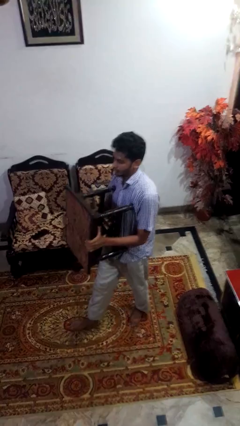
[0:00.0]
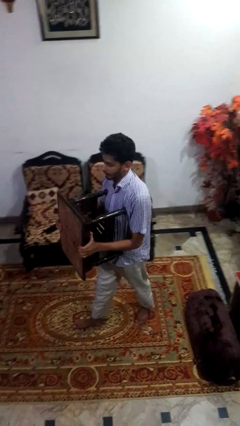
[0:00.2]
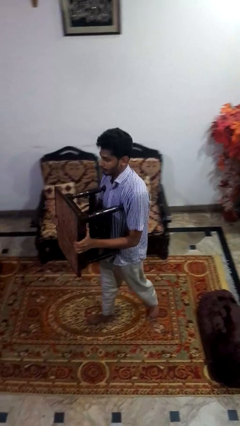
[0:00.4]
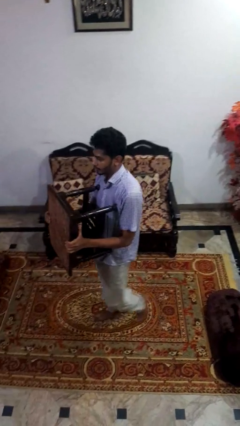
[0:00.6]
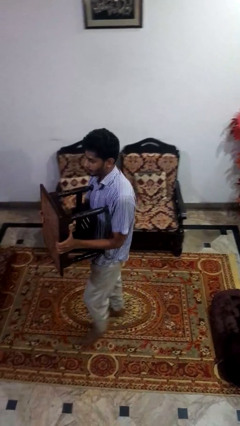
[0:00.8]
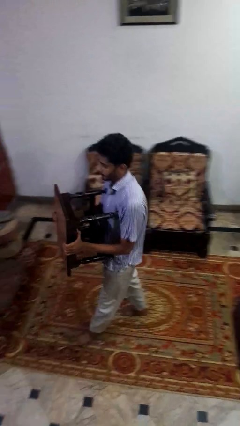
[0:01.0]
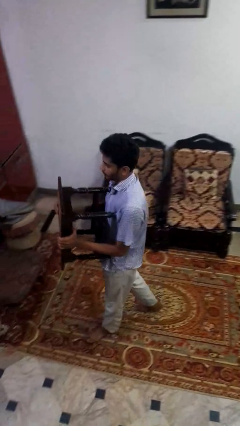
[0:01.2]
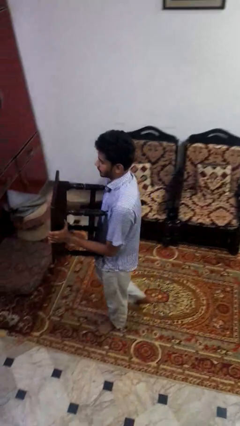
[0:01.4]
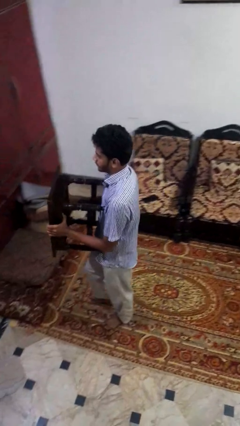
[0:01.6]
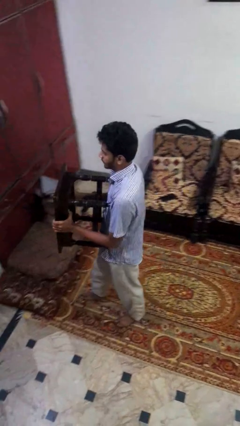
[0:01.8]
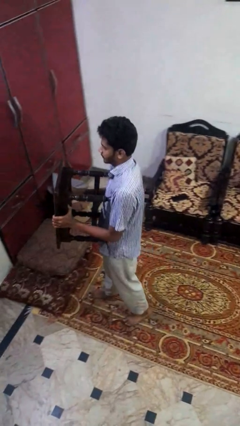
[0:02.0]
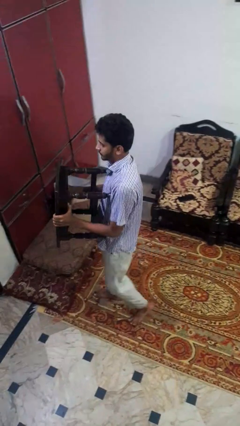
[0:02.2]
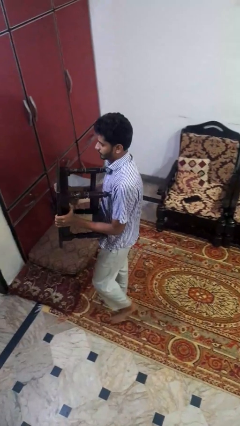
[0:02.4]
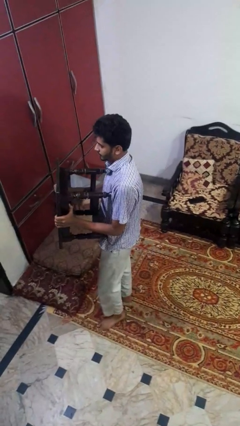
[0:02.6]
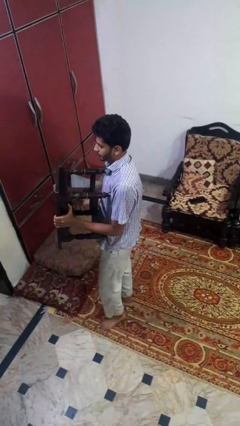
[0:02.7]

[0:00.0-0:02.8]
person carries furniture

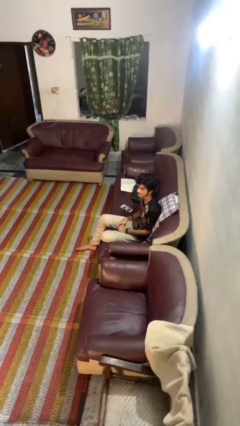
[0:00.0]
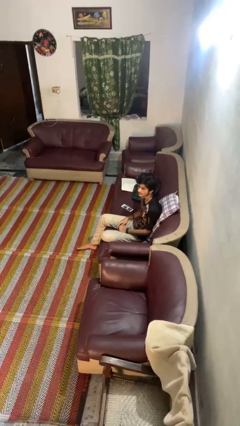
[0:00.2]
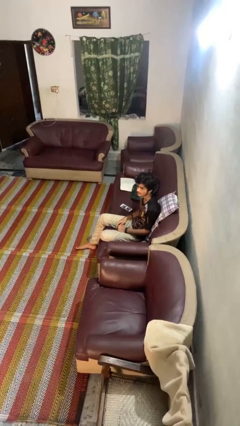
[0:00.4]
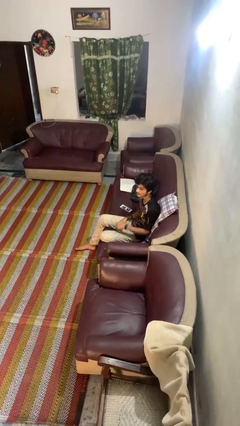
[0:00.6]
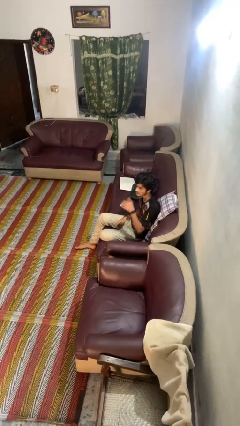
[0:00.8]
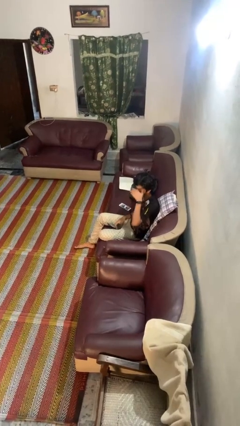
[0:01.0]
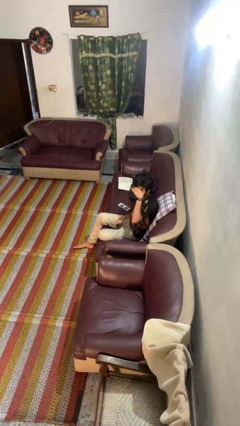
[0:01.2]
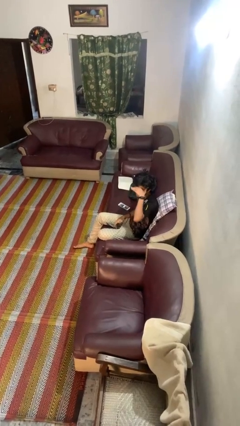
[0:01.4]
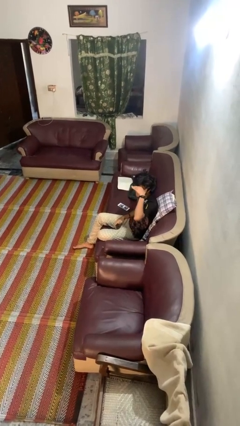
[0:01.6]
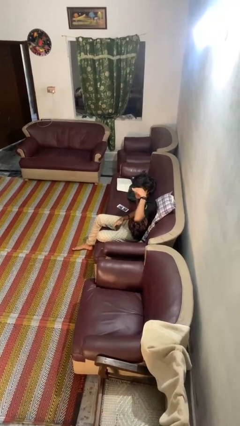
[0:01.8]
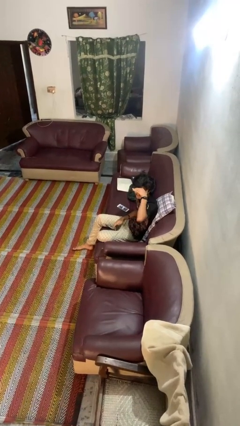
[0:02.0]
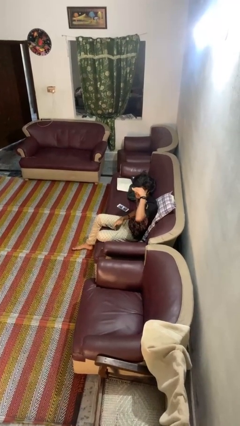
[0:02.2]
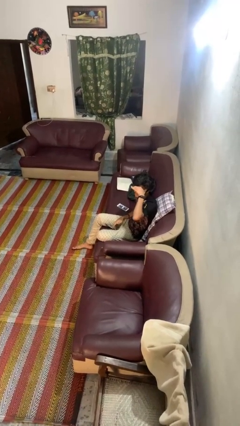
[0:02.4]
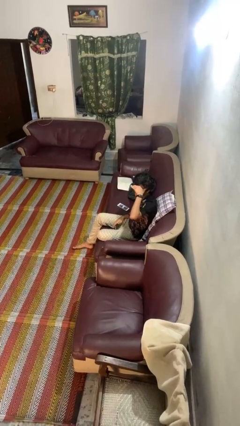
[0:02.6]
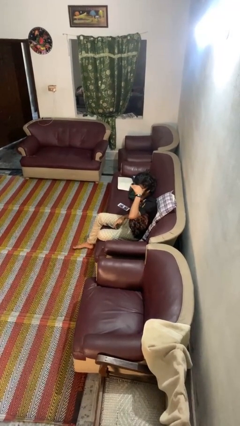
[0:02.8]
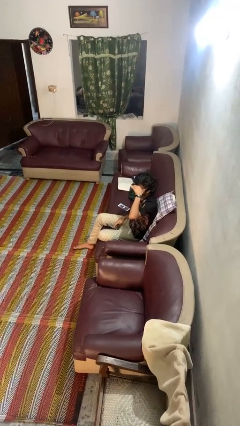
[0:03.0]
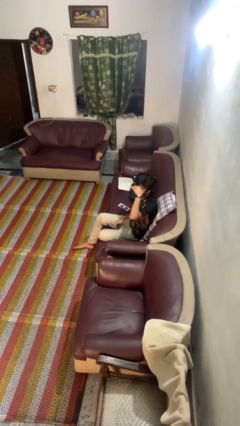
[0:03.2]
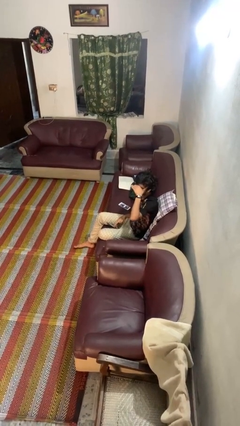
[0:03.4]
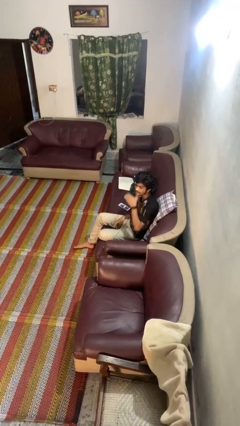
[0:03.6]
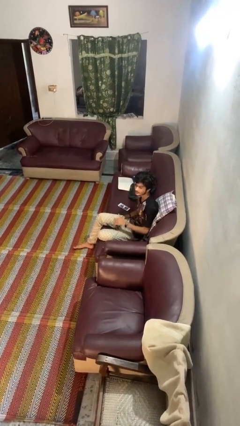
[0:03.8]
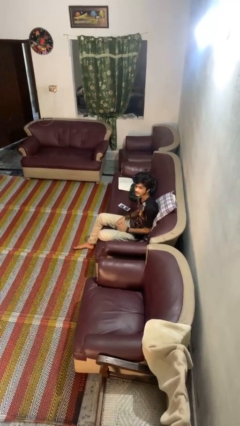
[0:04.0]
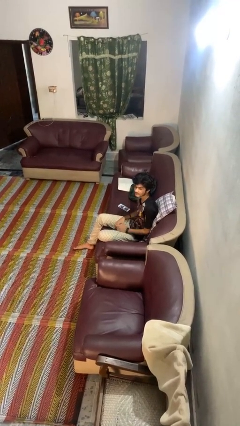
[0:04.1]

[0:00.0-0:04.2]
person shades eyes

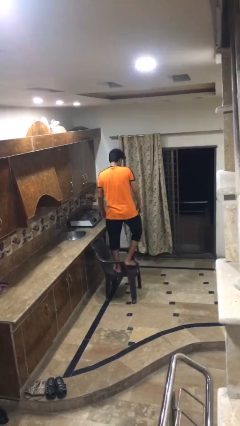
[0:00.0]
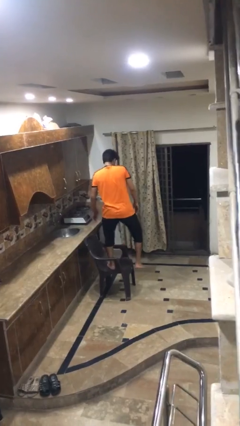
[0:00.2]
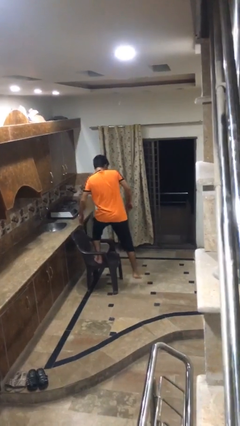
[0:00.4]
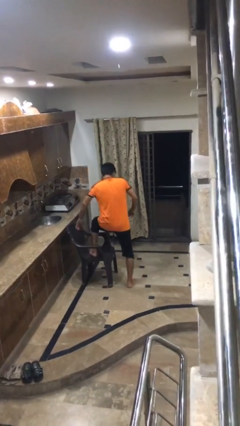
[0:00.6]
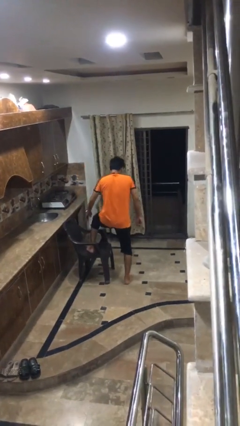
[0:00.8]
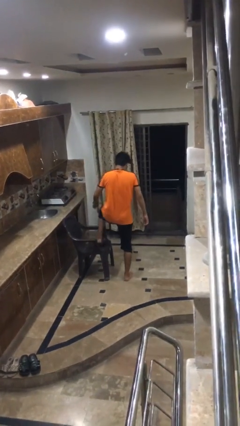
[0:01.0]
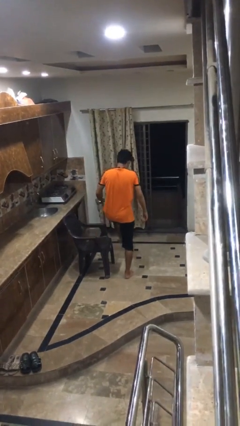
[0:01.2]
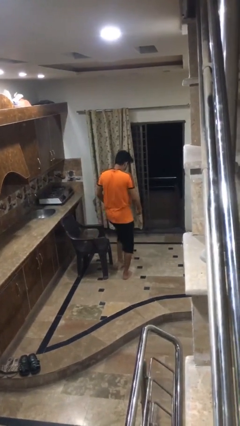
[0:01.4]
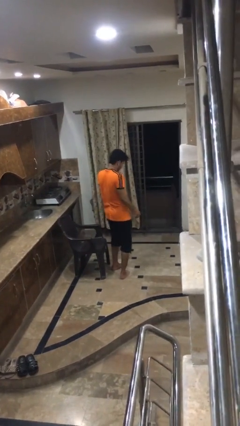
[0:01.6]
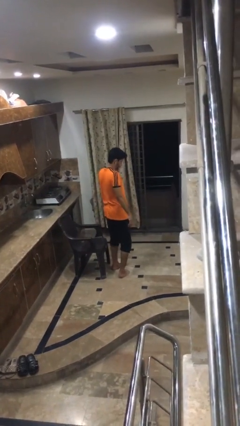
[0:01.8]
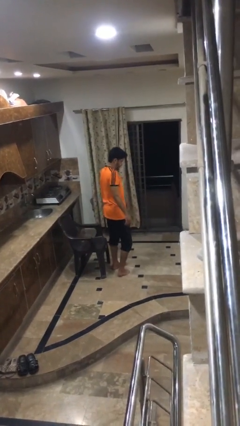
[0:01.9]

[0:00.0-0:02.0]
person climbs off chair

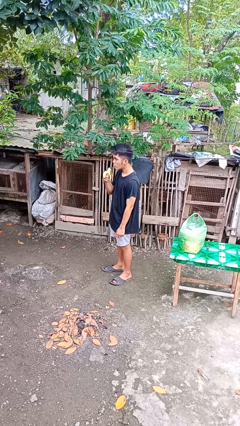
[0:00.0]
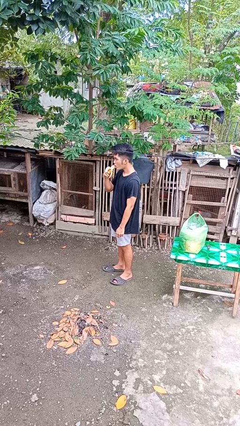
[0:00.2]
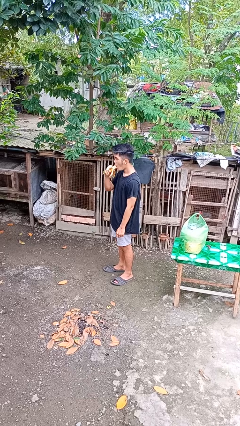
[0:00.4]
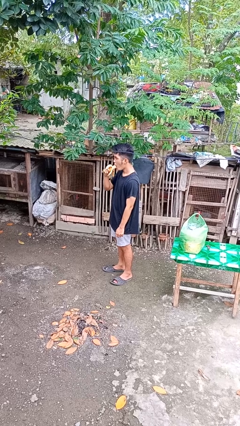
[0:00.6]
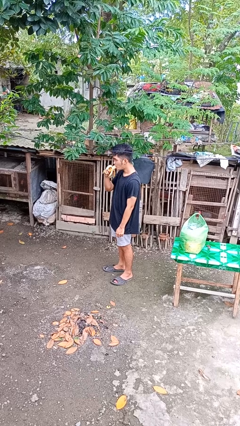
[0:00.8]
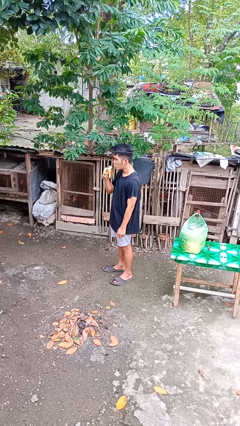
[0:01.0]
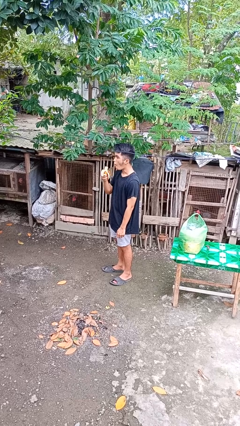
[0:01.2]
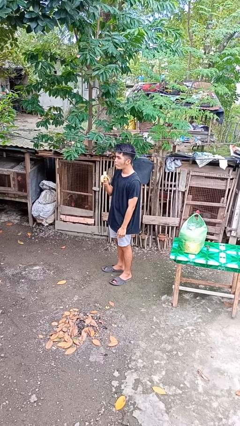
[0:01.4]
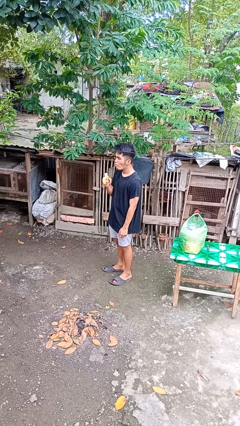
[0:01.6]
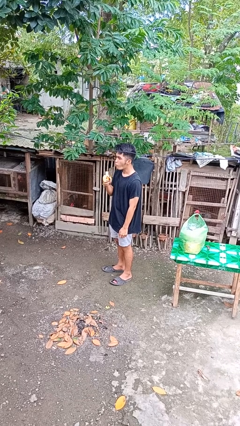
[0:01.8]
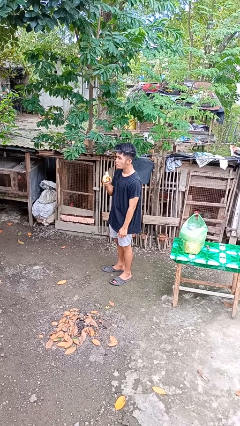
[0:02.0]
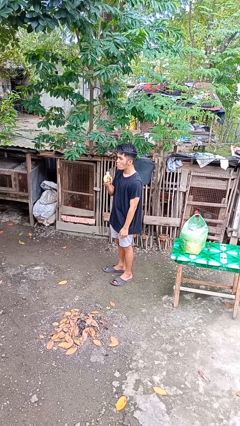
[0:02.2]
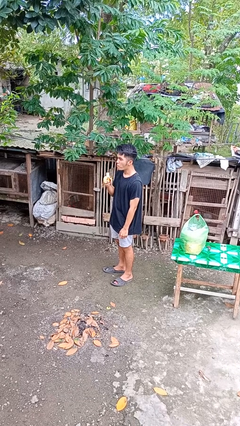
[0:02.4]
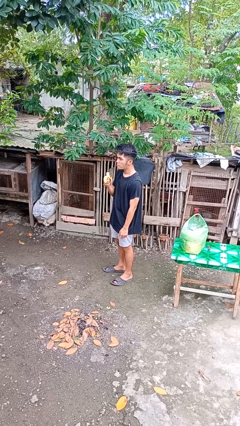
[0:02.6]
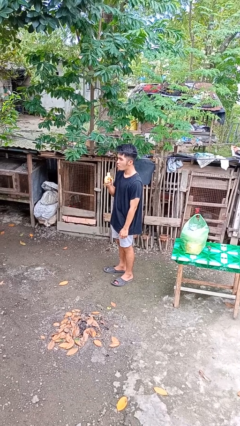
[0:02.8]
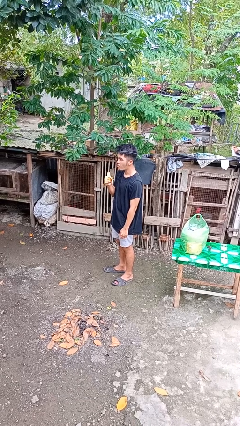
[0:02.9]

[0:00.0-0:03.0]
person eats banana

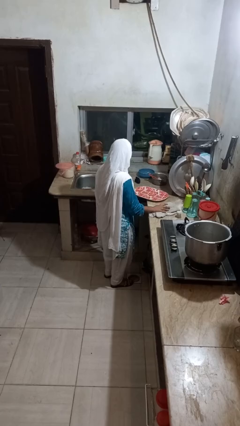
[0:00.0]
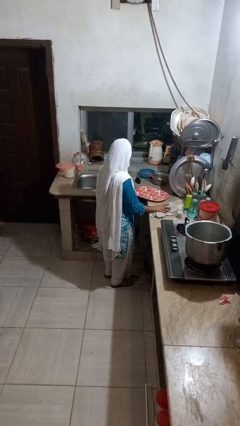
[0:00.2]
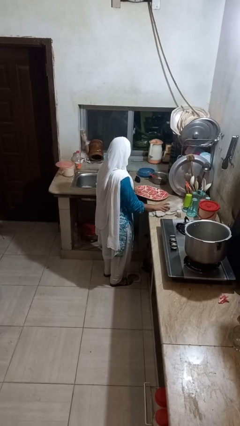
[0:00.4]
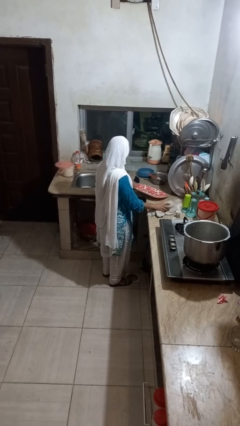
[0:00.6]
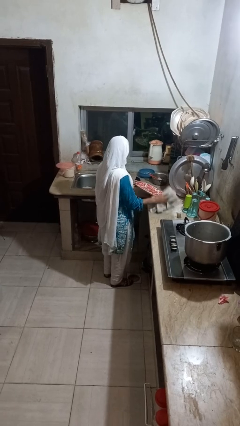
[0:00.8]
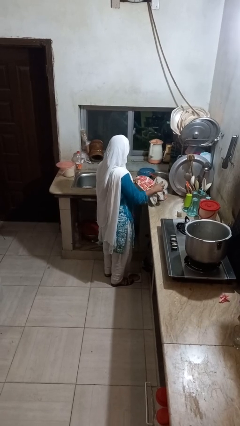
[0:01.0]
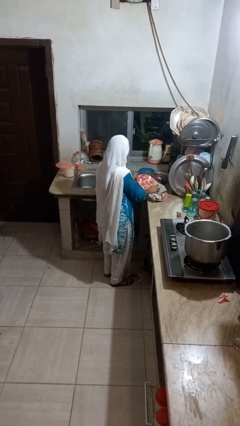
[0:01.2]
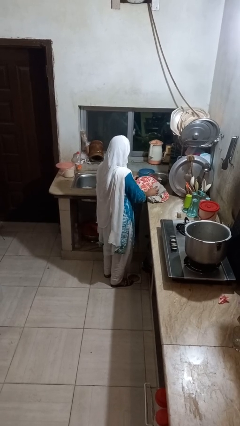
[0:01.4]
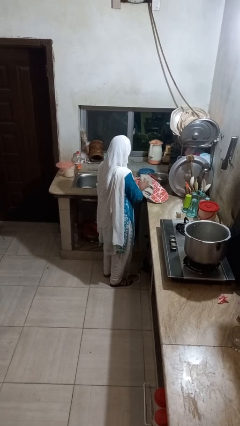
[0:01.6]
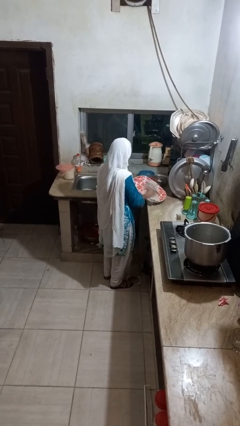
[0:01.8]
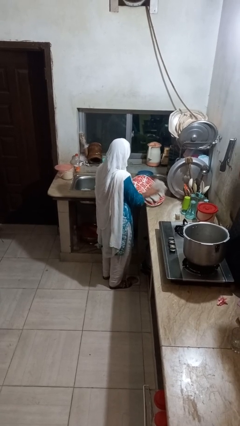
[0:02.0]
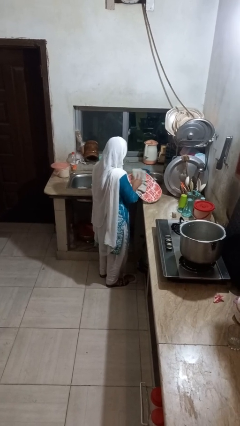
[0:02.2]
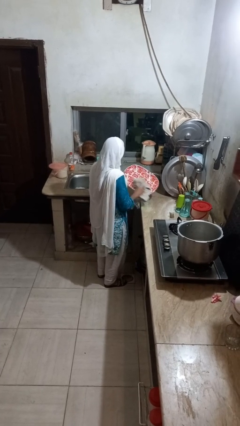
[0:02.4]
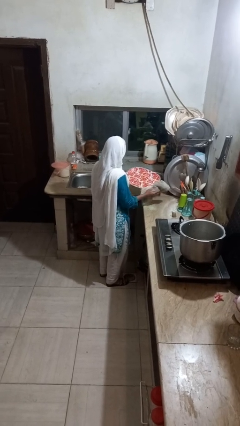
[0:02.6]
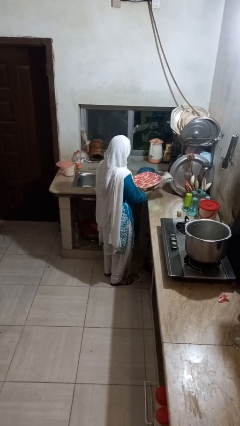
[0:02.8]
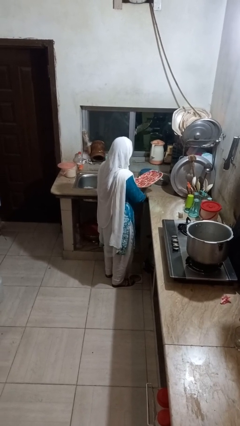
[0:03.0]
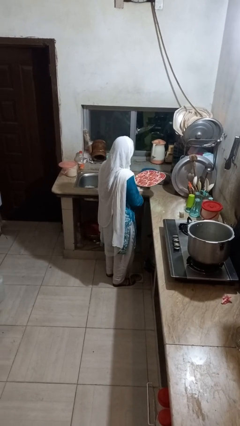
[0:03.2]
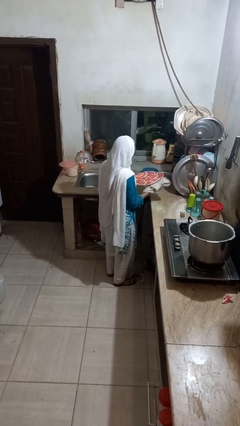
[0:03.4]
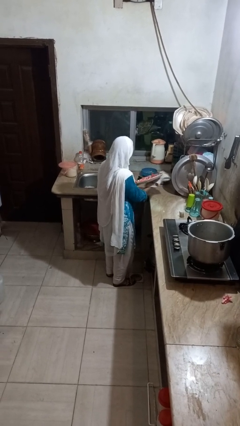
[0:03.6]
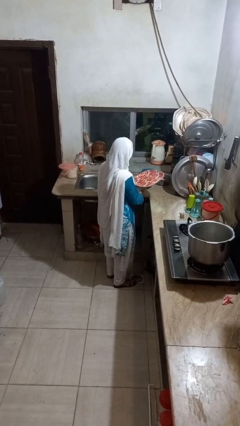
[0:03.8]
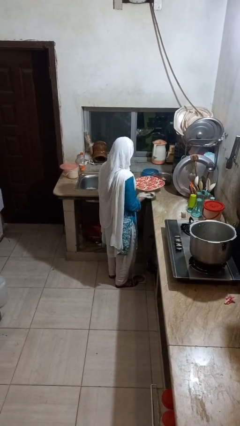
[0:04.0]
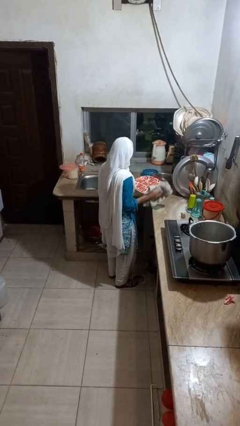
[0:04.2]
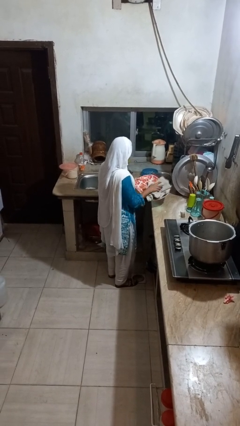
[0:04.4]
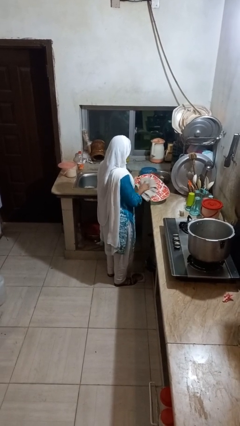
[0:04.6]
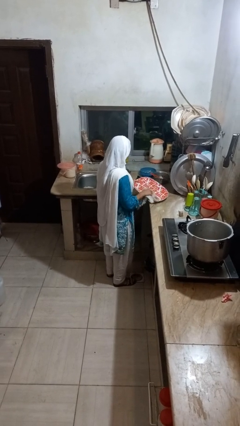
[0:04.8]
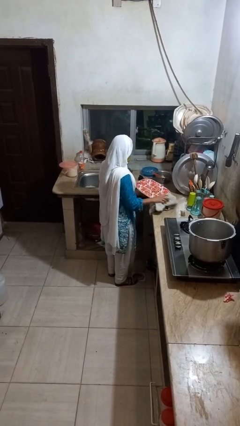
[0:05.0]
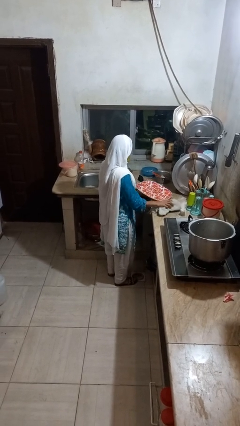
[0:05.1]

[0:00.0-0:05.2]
person dries dish

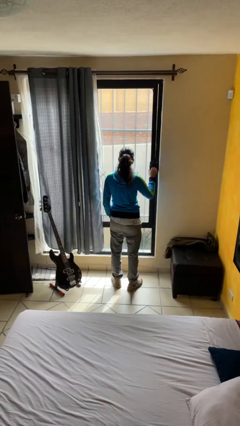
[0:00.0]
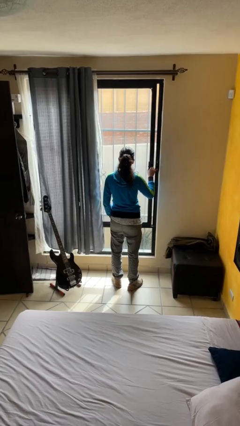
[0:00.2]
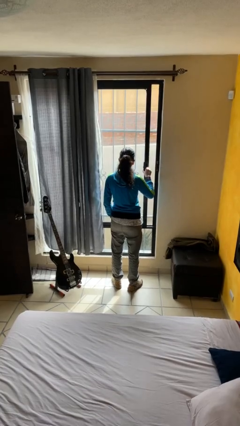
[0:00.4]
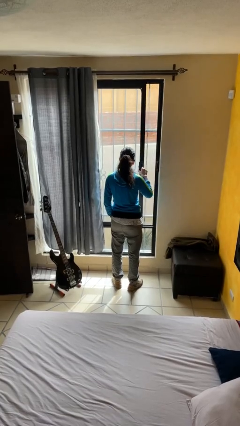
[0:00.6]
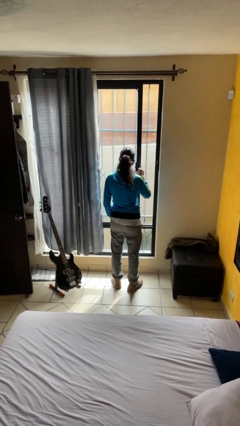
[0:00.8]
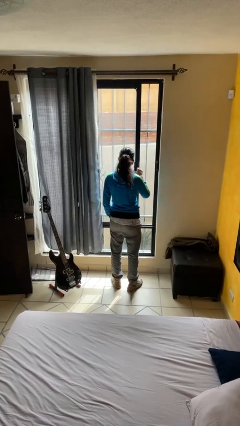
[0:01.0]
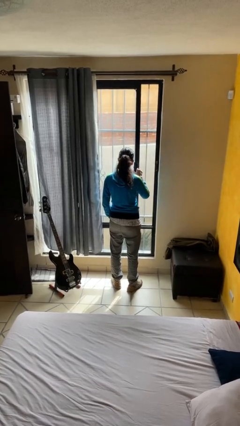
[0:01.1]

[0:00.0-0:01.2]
person opens home window
